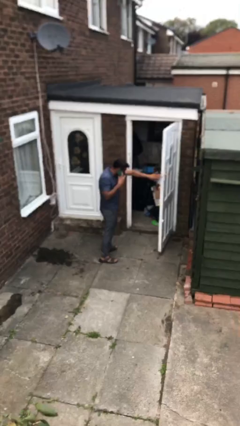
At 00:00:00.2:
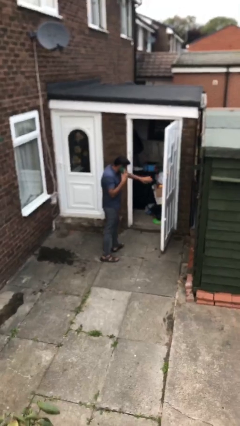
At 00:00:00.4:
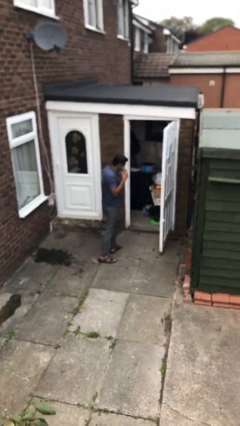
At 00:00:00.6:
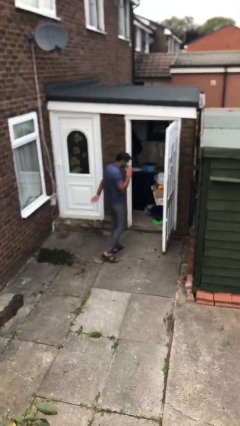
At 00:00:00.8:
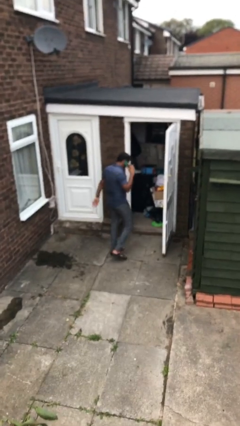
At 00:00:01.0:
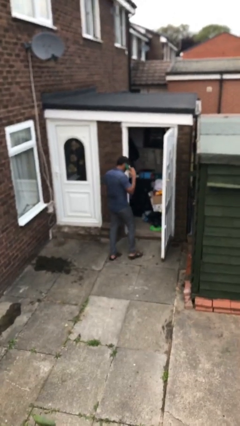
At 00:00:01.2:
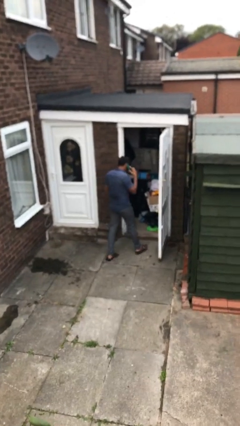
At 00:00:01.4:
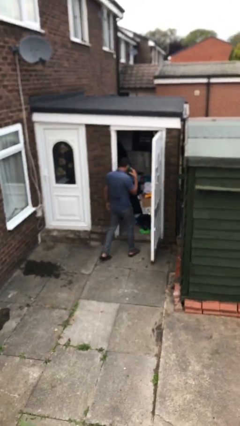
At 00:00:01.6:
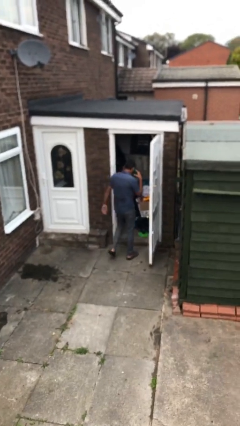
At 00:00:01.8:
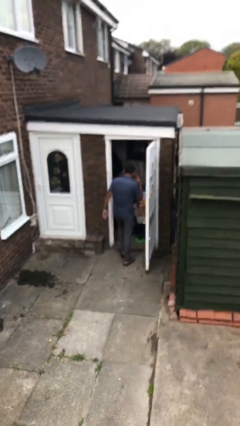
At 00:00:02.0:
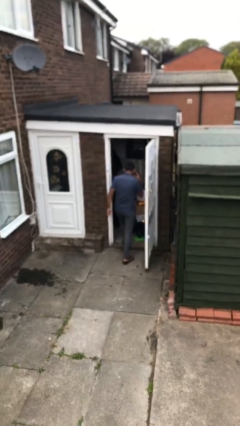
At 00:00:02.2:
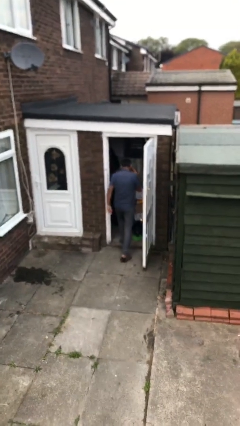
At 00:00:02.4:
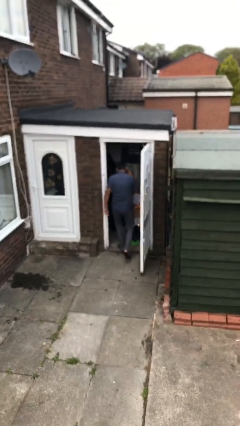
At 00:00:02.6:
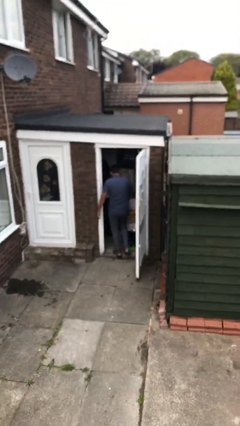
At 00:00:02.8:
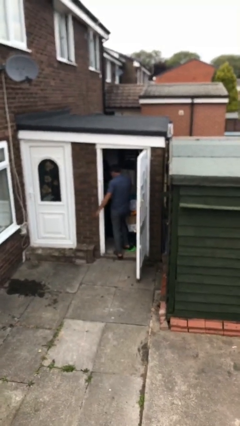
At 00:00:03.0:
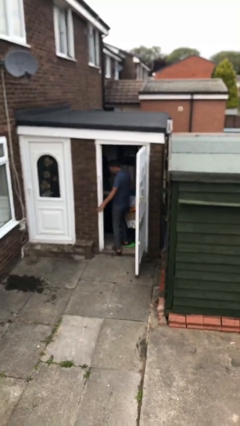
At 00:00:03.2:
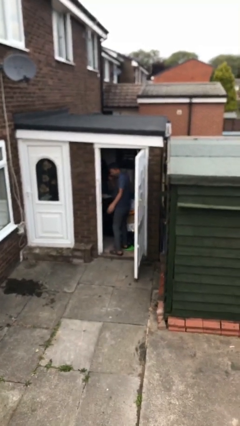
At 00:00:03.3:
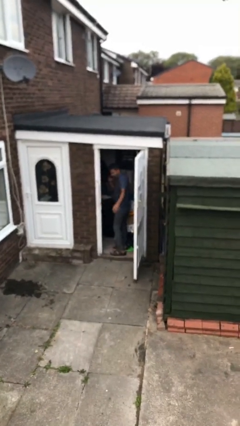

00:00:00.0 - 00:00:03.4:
person exits scene through structure

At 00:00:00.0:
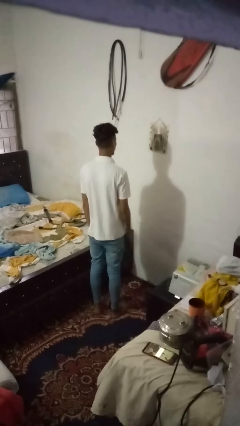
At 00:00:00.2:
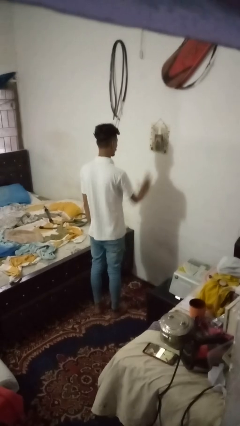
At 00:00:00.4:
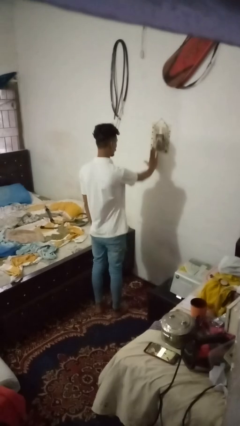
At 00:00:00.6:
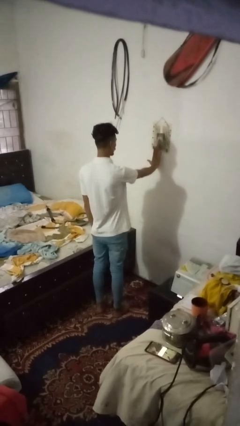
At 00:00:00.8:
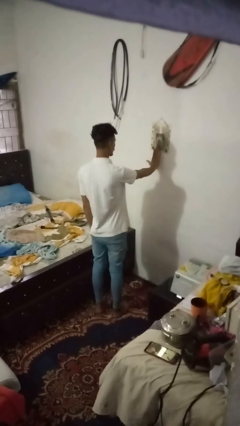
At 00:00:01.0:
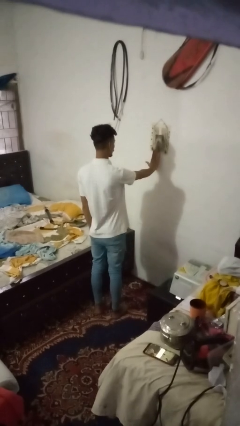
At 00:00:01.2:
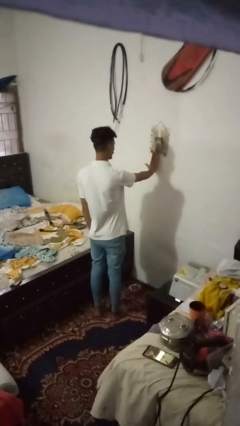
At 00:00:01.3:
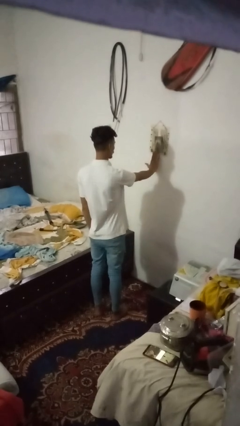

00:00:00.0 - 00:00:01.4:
person gestures stop

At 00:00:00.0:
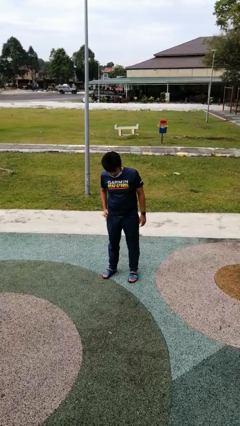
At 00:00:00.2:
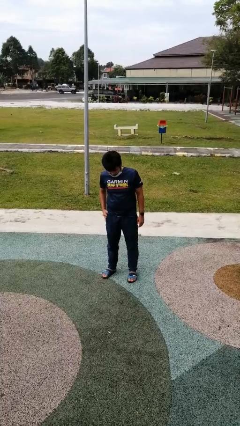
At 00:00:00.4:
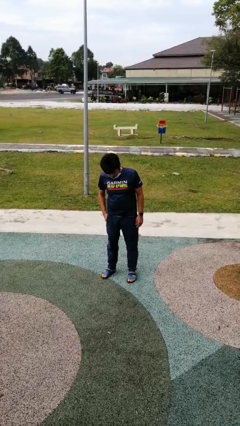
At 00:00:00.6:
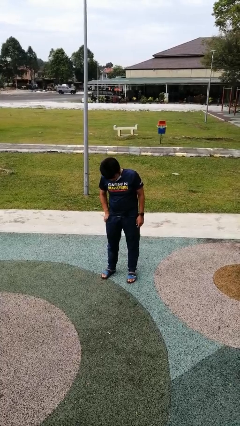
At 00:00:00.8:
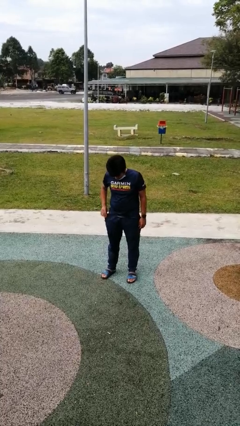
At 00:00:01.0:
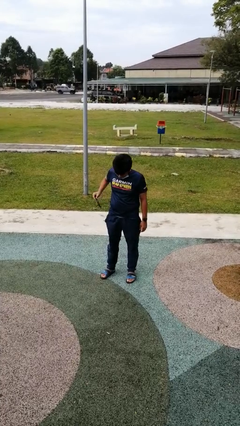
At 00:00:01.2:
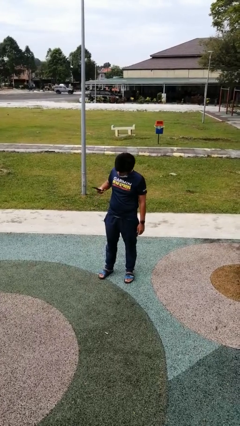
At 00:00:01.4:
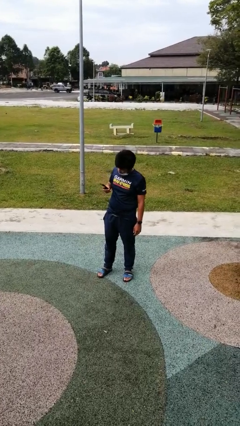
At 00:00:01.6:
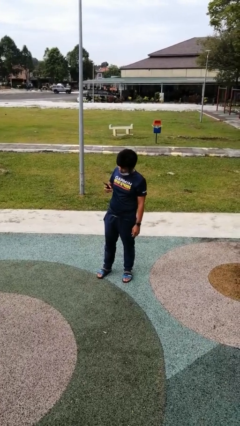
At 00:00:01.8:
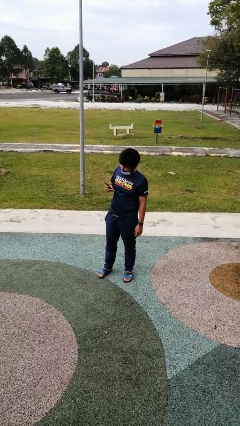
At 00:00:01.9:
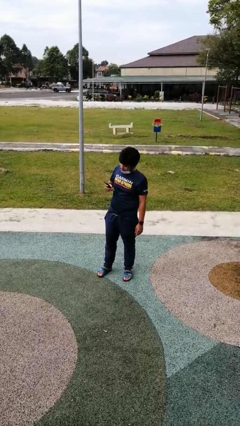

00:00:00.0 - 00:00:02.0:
person takes phone from pocket

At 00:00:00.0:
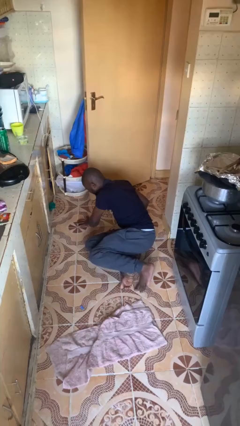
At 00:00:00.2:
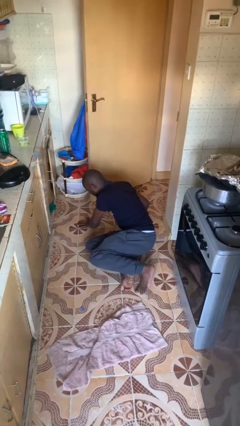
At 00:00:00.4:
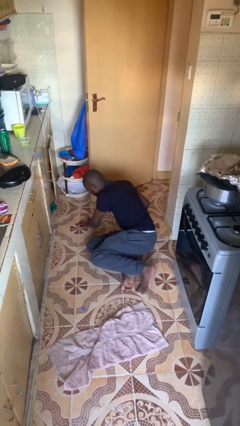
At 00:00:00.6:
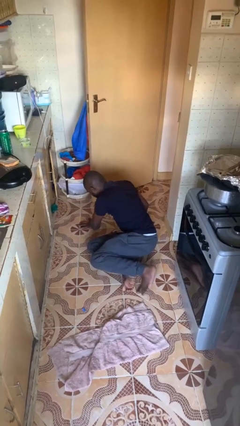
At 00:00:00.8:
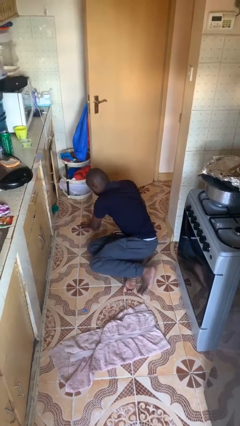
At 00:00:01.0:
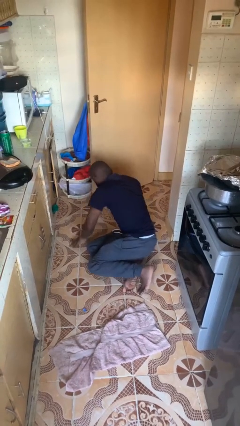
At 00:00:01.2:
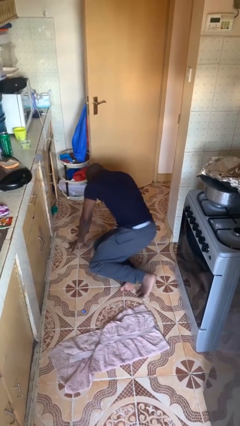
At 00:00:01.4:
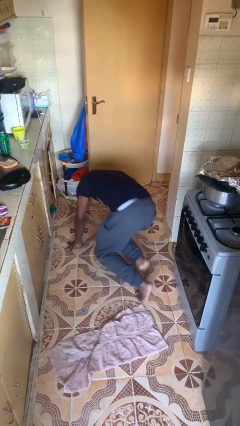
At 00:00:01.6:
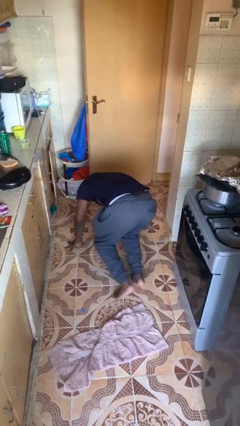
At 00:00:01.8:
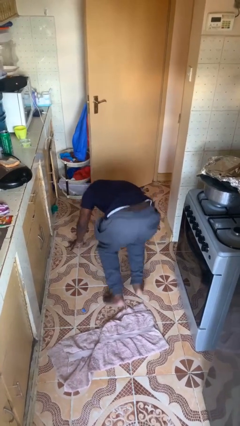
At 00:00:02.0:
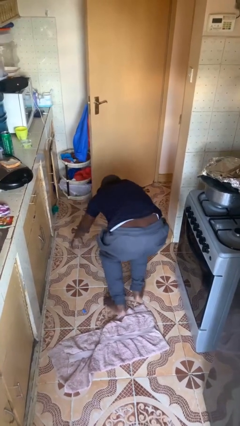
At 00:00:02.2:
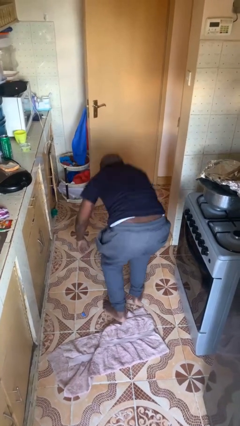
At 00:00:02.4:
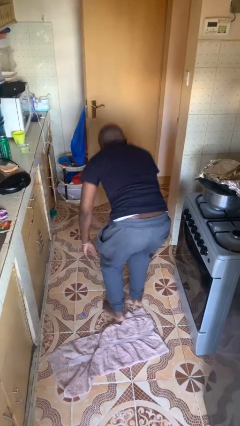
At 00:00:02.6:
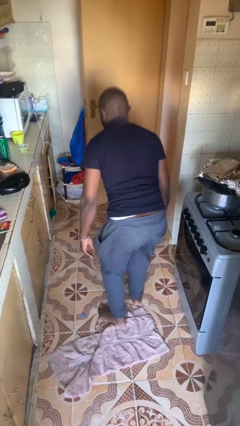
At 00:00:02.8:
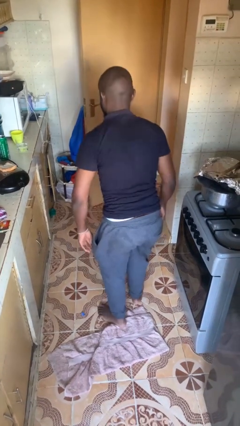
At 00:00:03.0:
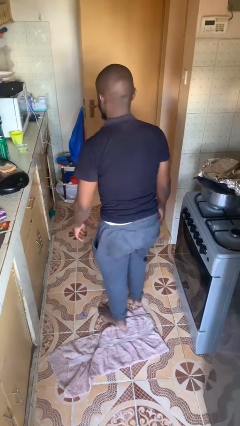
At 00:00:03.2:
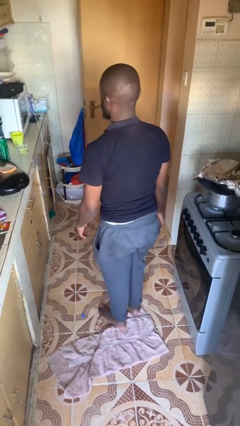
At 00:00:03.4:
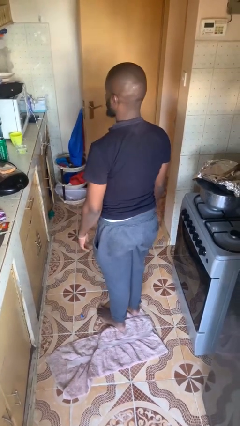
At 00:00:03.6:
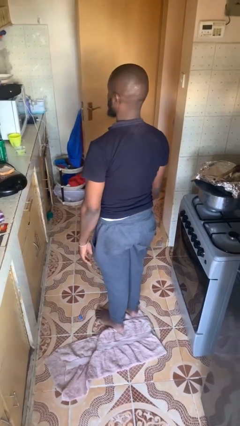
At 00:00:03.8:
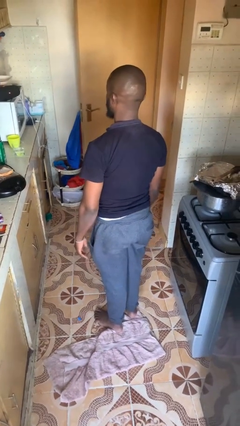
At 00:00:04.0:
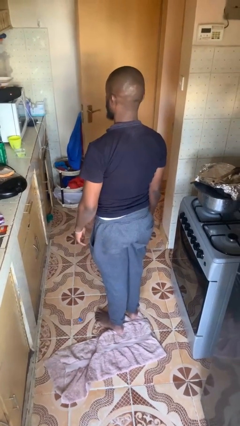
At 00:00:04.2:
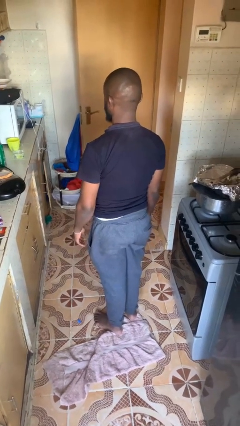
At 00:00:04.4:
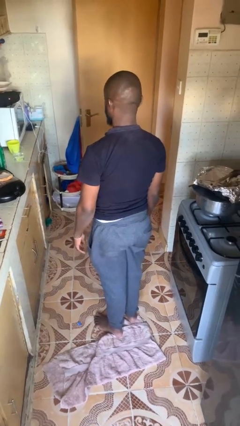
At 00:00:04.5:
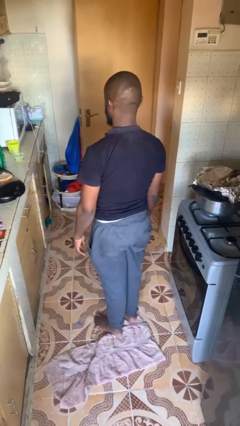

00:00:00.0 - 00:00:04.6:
person stands up from floor

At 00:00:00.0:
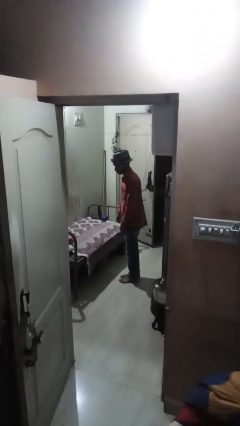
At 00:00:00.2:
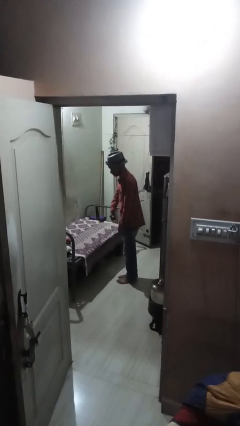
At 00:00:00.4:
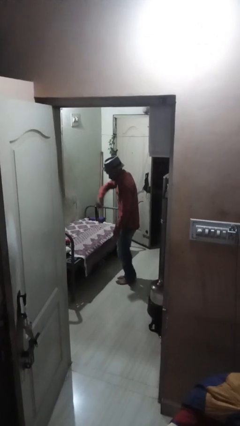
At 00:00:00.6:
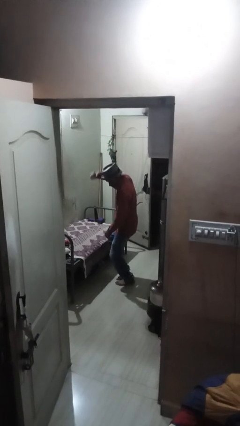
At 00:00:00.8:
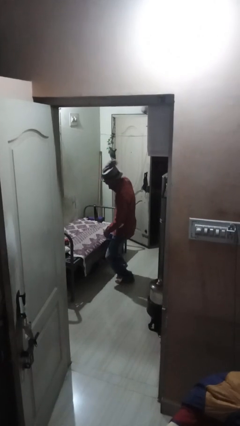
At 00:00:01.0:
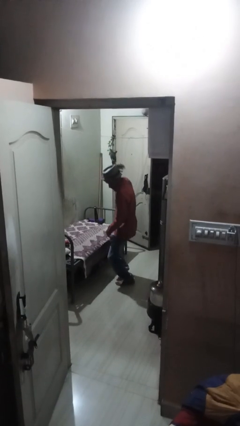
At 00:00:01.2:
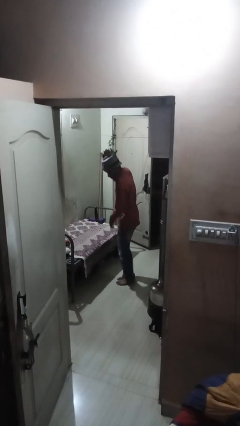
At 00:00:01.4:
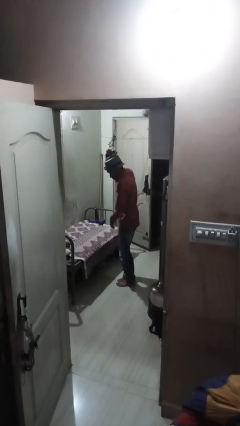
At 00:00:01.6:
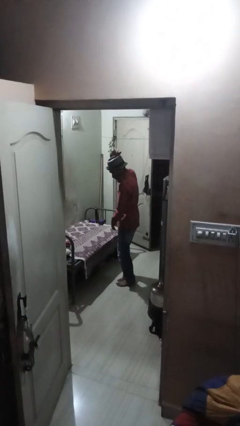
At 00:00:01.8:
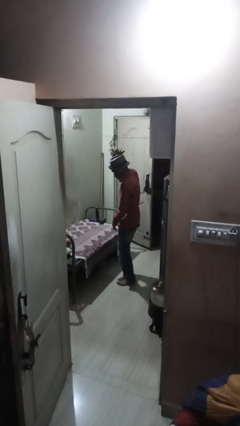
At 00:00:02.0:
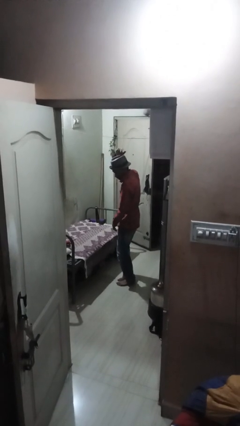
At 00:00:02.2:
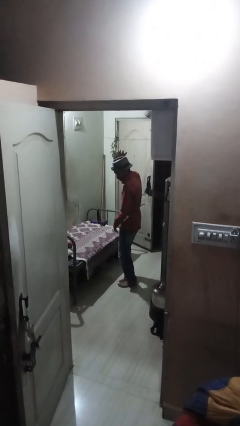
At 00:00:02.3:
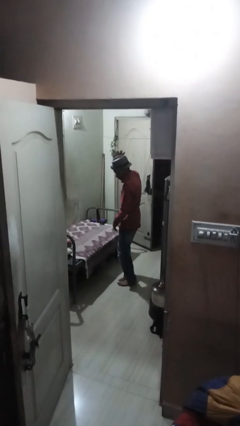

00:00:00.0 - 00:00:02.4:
person dances in place

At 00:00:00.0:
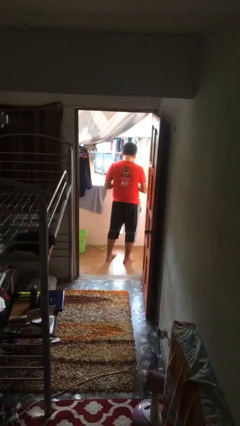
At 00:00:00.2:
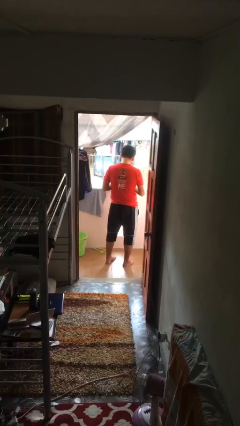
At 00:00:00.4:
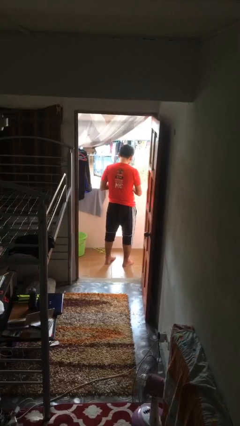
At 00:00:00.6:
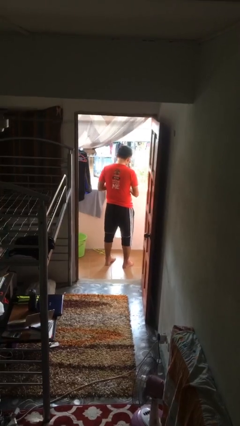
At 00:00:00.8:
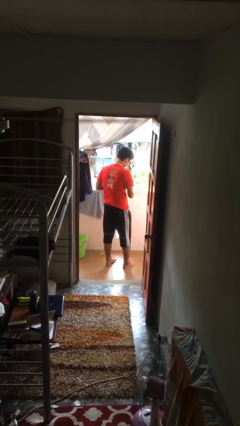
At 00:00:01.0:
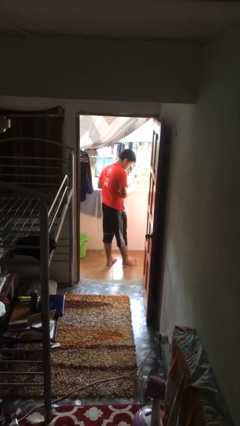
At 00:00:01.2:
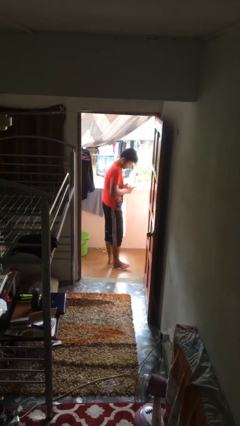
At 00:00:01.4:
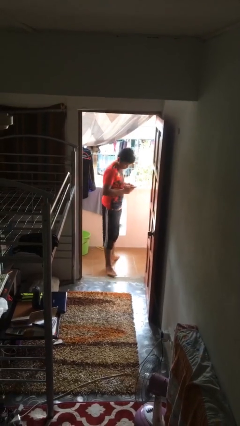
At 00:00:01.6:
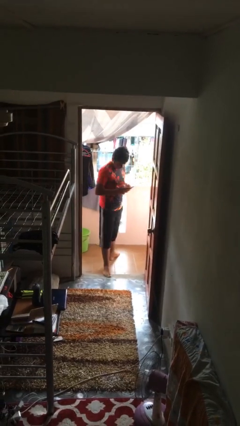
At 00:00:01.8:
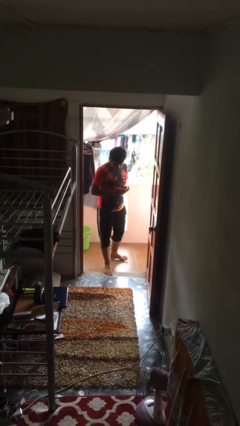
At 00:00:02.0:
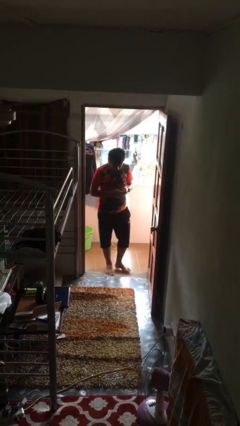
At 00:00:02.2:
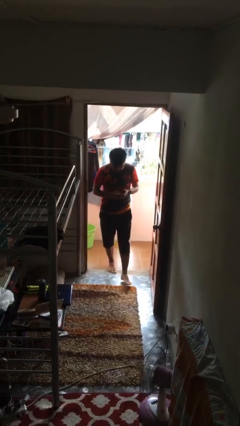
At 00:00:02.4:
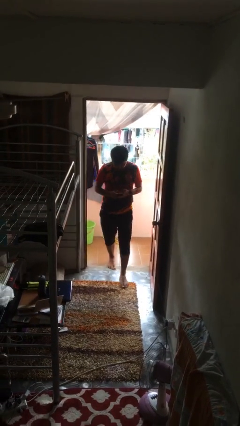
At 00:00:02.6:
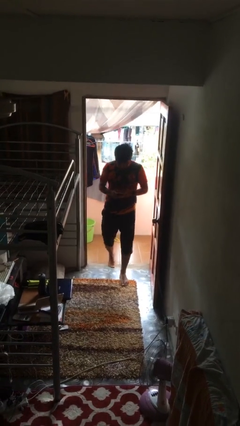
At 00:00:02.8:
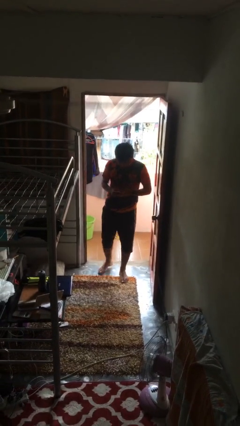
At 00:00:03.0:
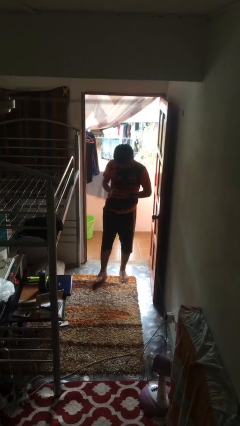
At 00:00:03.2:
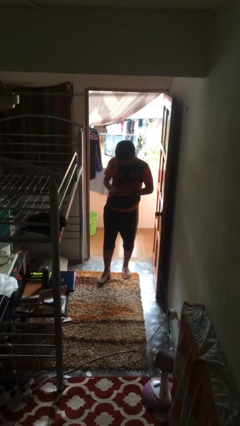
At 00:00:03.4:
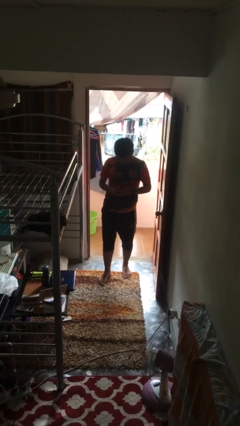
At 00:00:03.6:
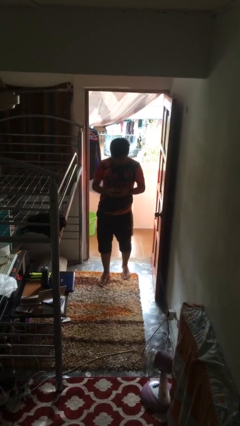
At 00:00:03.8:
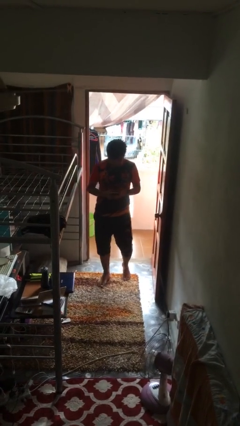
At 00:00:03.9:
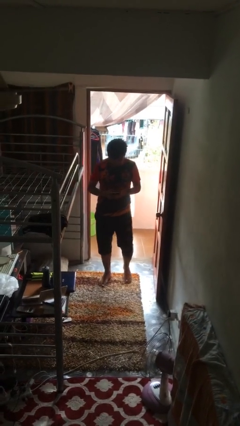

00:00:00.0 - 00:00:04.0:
person enters scene through structure
